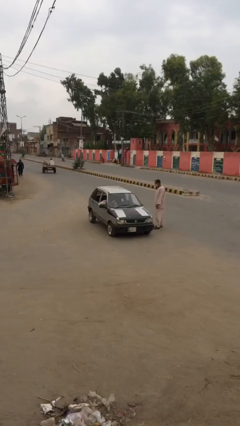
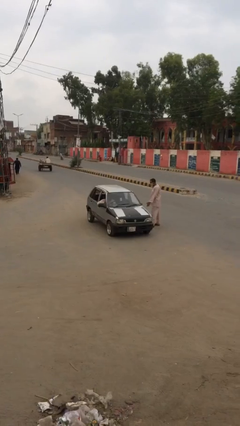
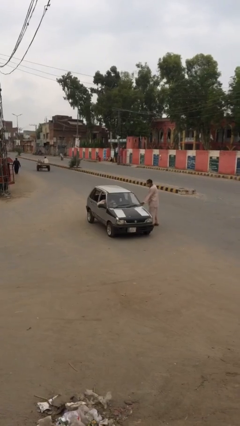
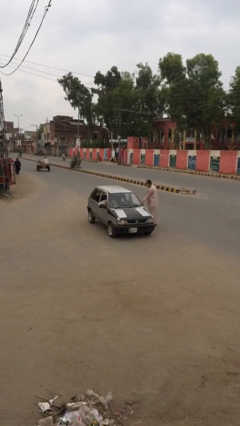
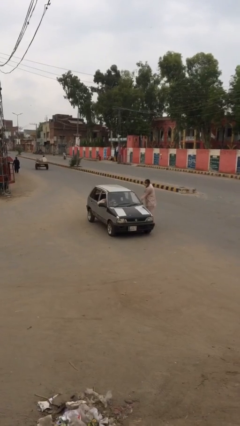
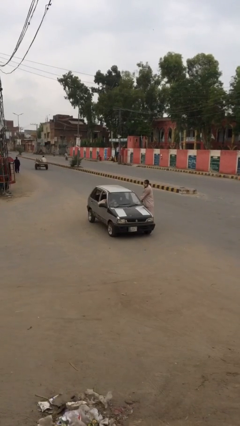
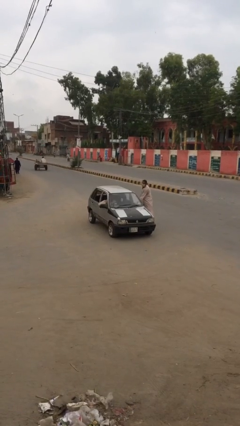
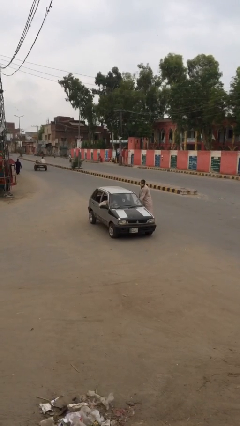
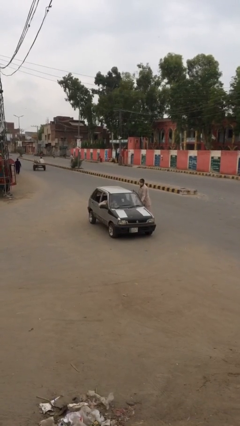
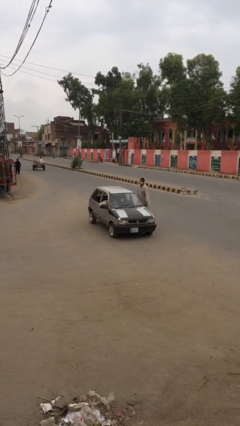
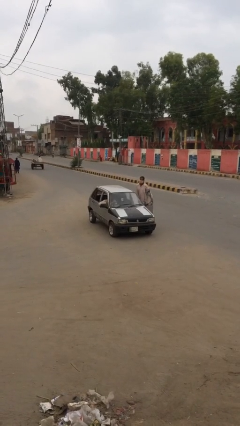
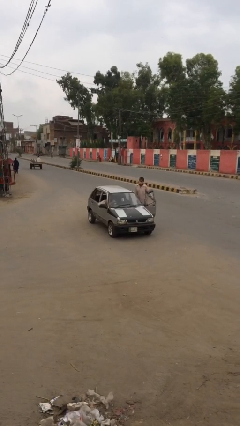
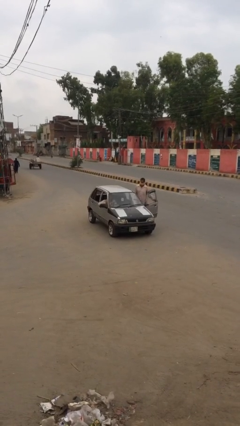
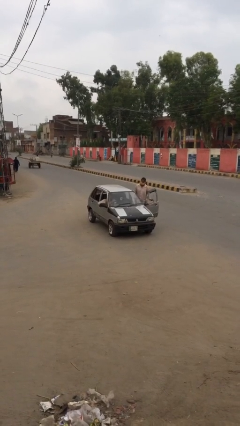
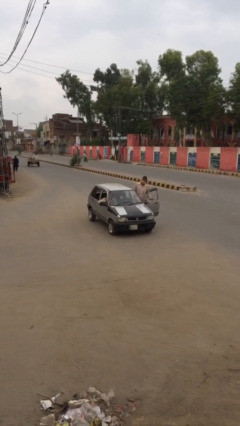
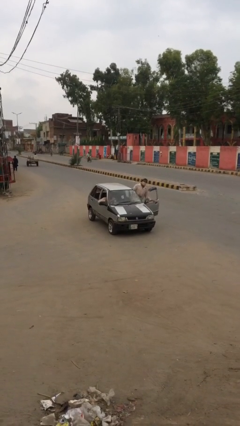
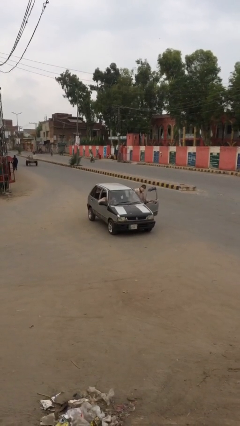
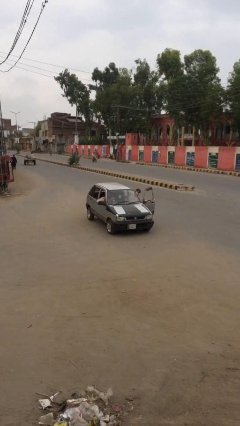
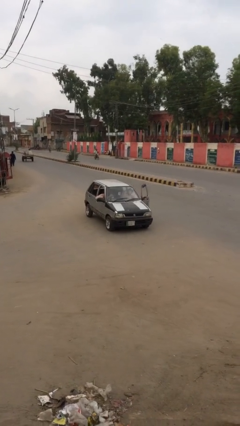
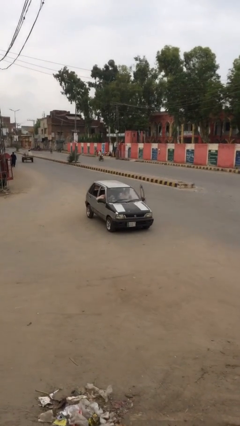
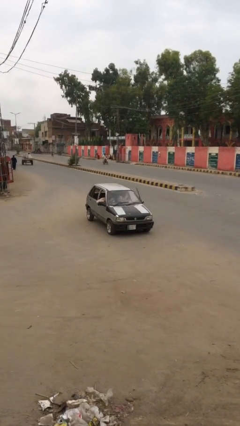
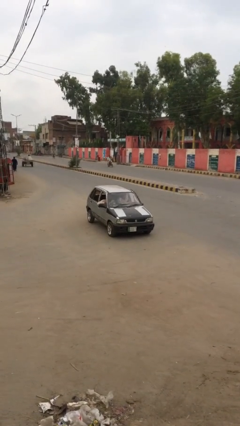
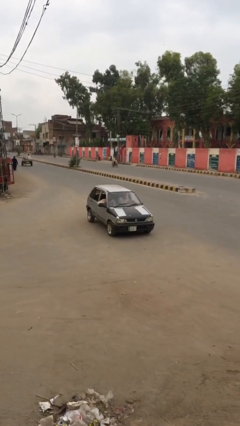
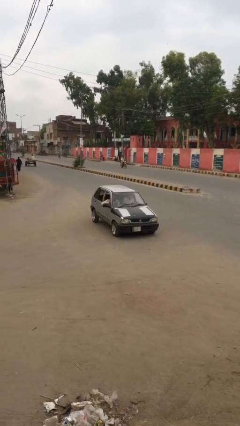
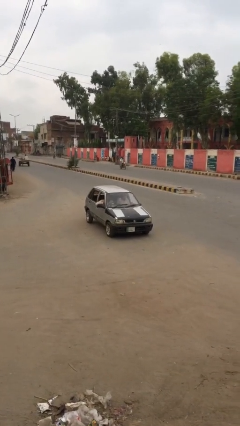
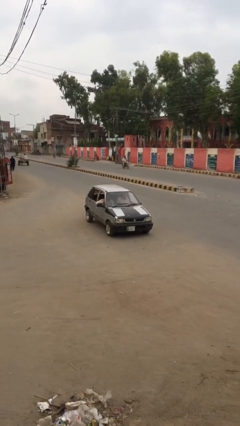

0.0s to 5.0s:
car picks up person

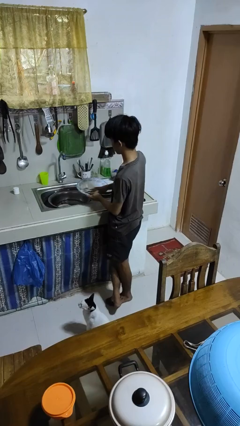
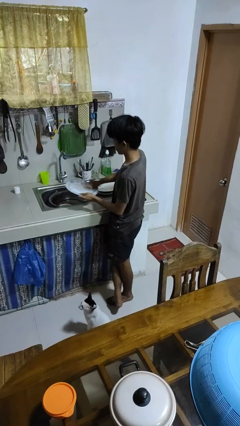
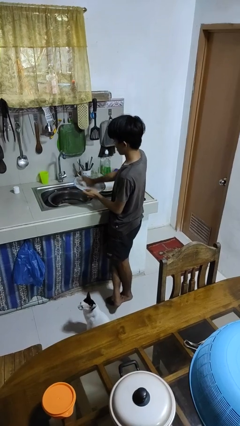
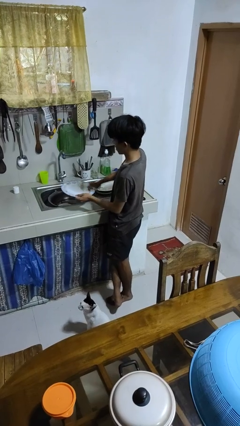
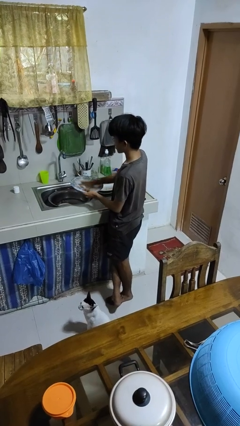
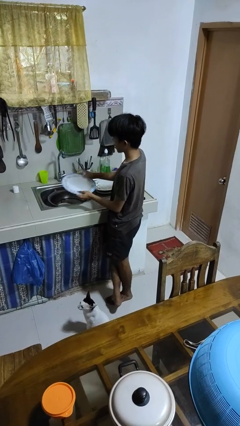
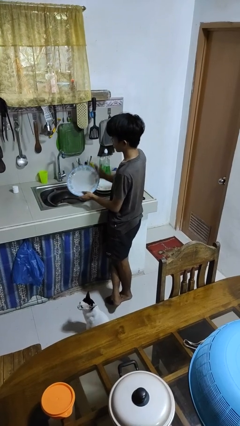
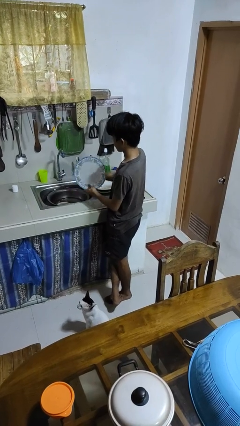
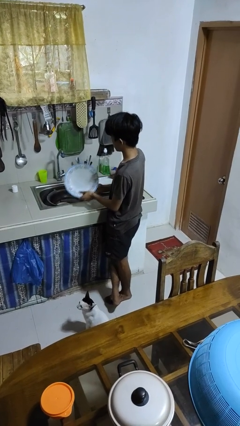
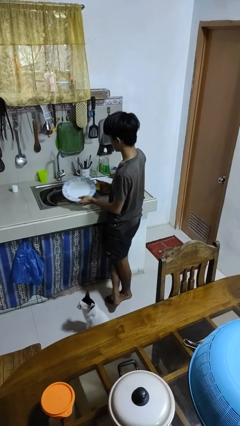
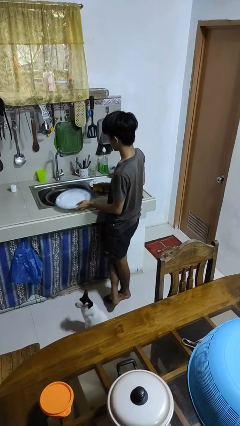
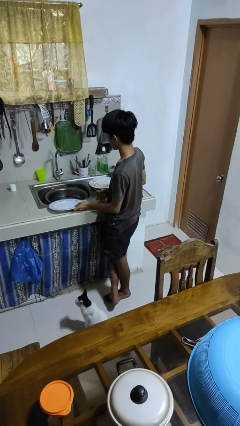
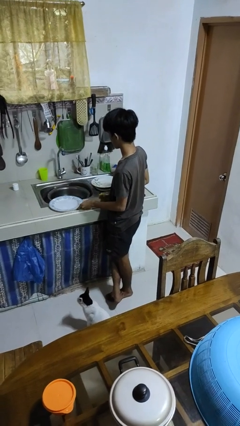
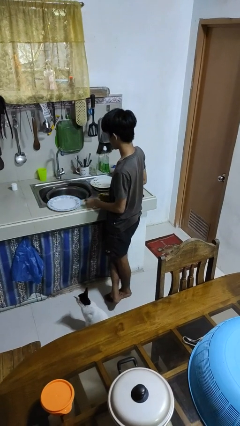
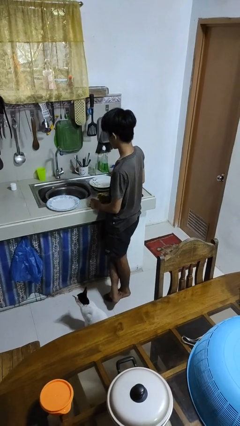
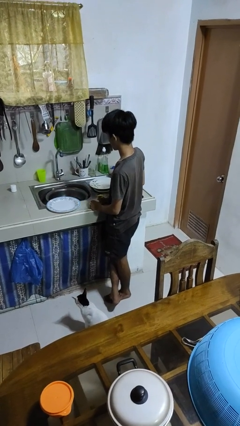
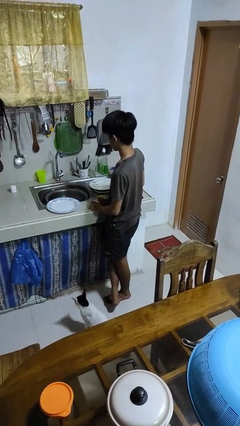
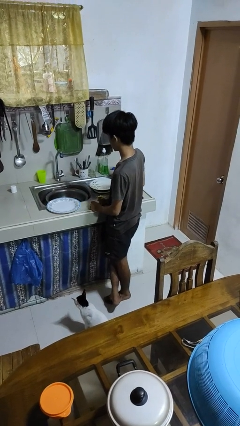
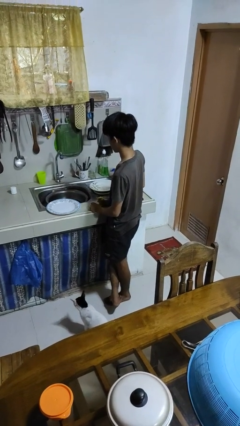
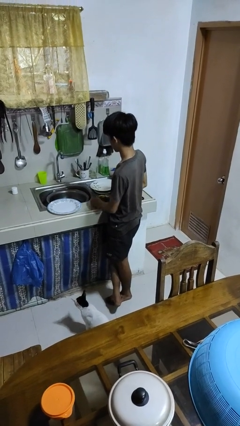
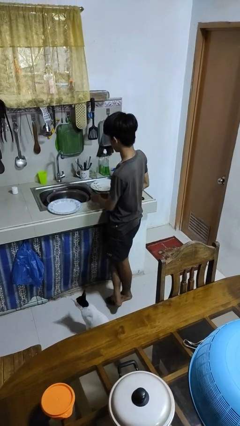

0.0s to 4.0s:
person washes hands

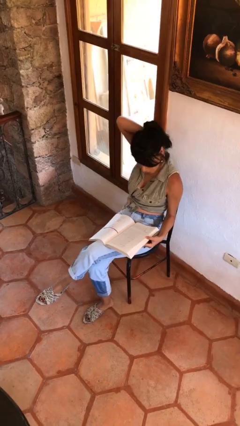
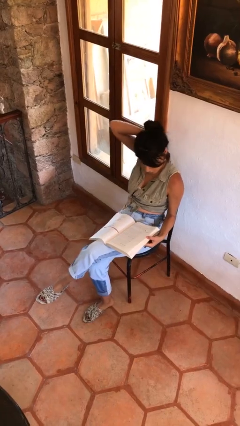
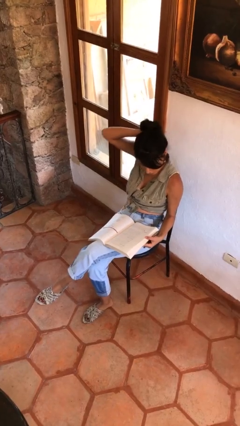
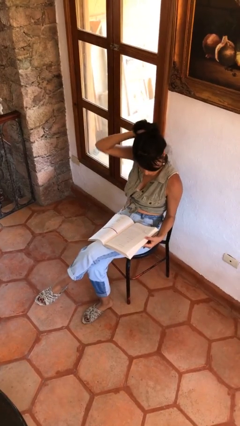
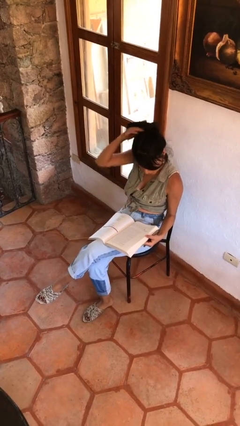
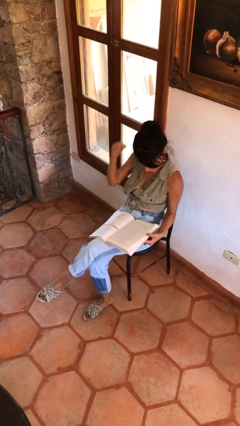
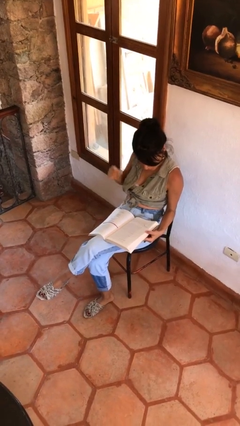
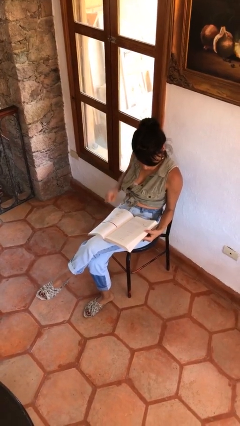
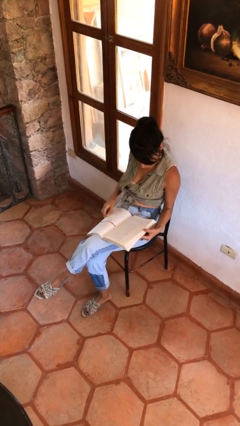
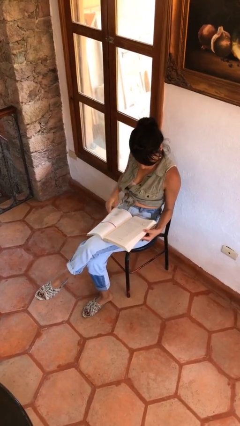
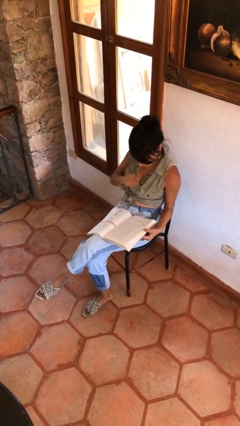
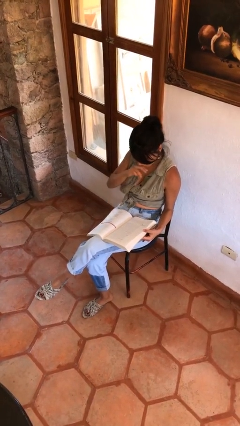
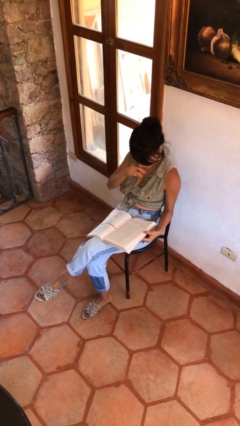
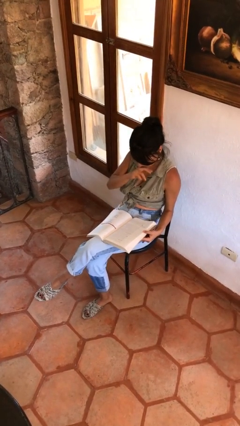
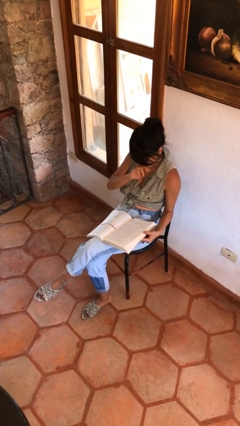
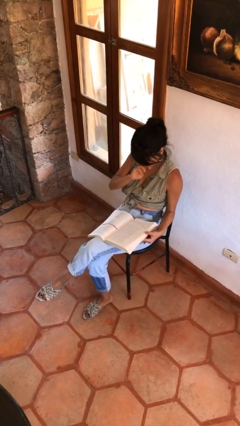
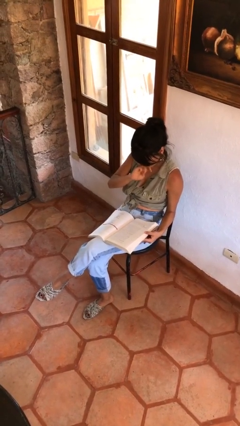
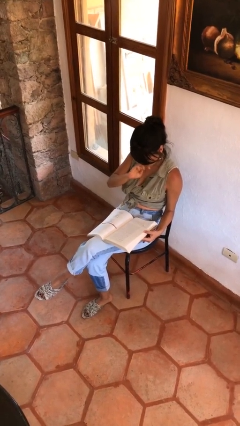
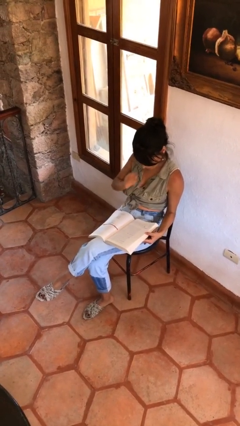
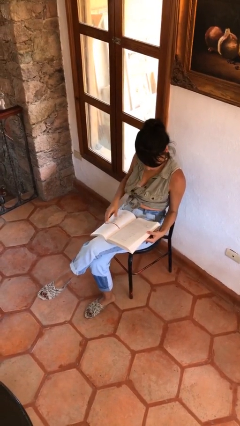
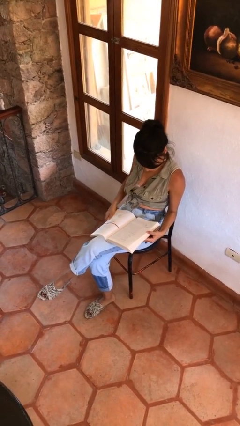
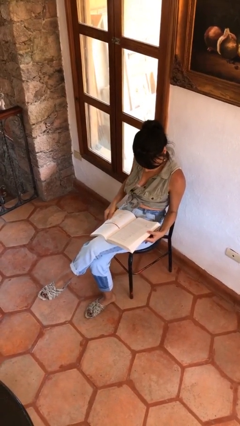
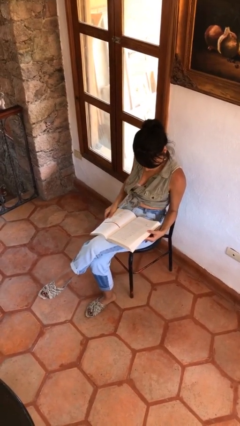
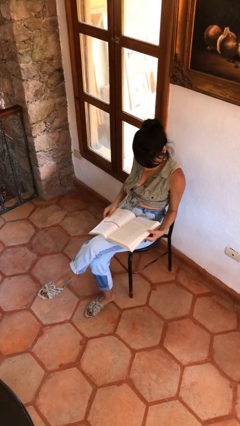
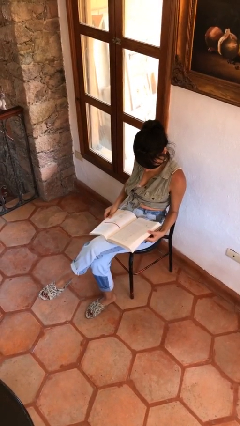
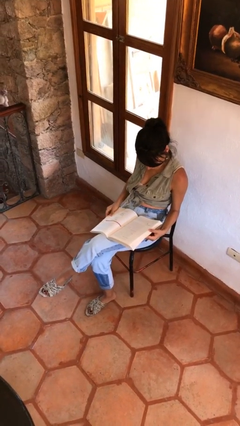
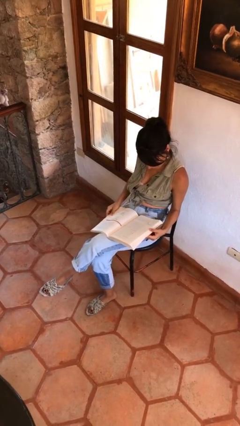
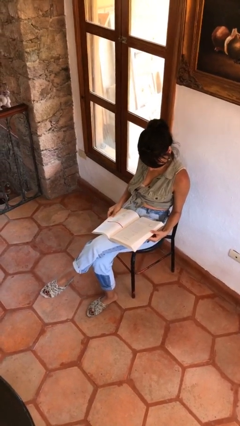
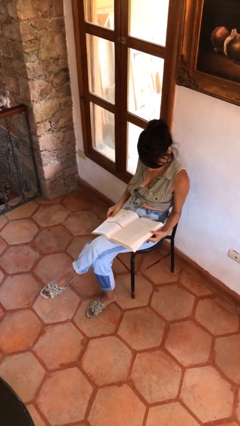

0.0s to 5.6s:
person reads document

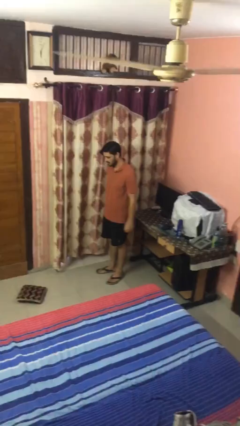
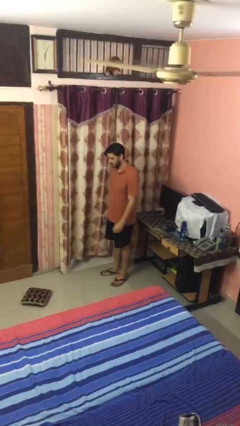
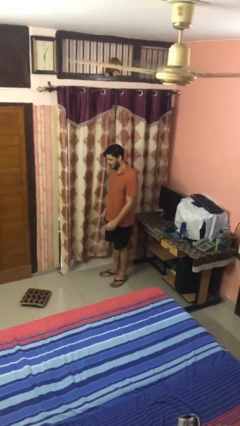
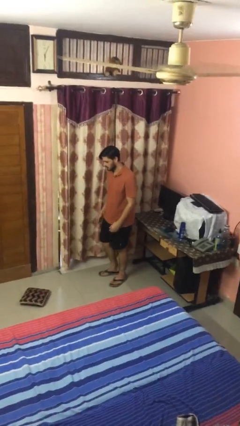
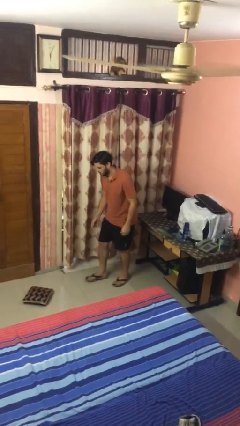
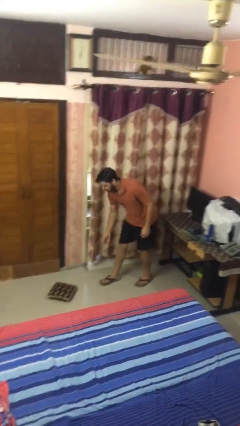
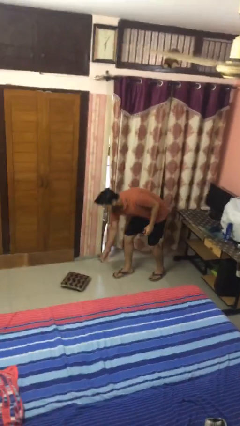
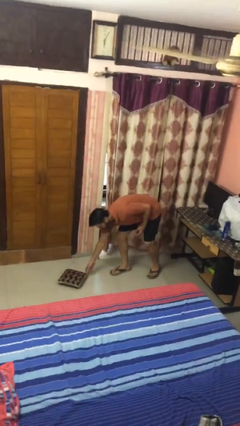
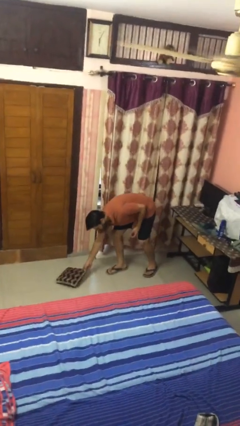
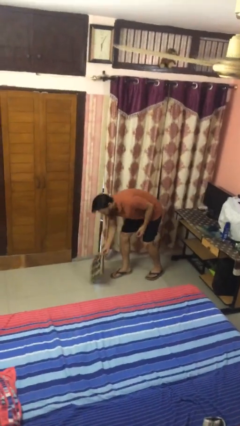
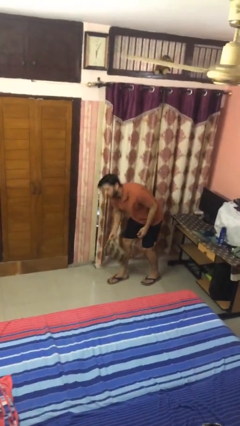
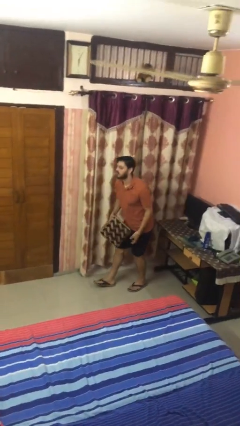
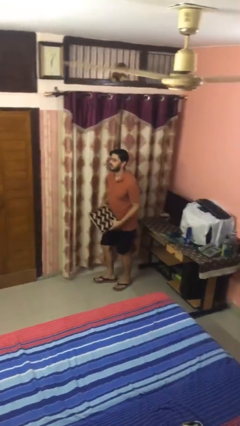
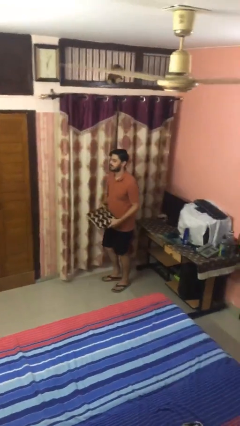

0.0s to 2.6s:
person picks up object from floor

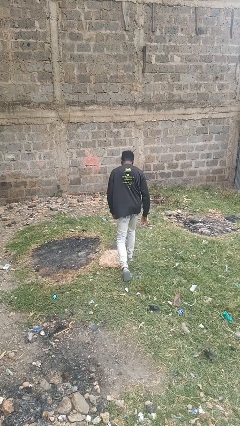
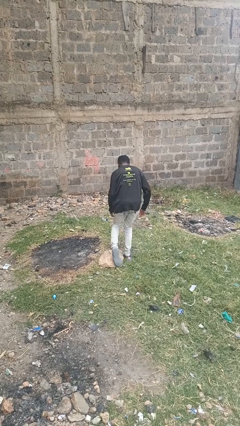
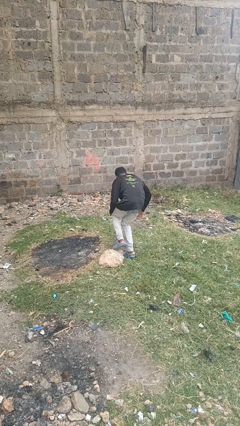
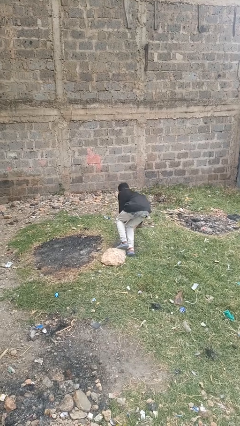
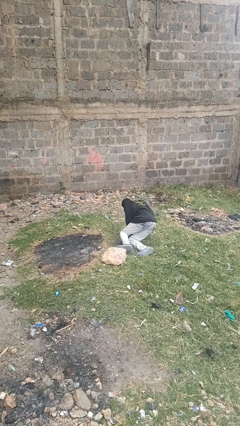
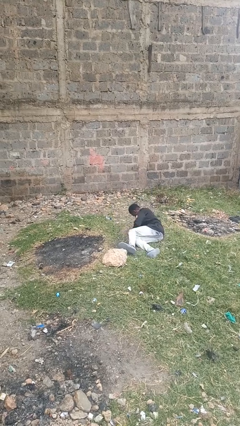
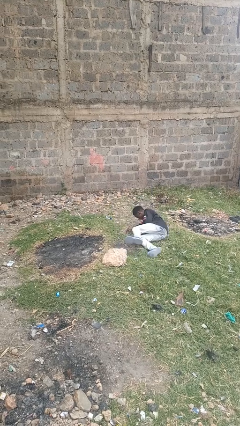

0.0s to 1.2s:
person trips on object on floor
